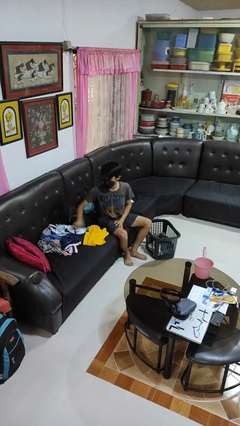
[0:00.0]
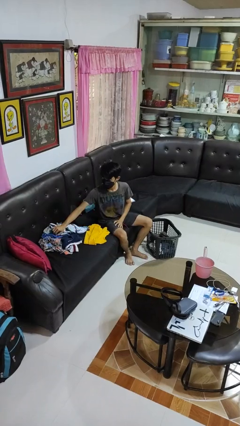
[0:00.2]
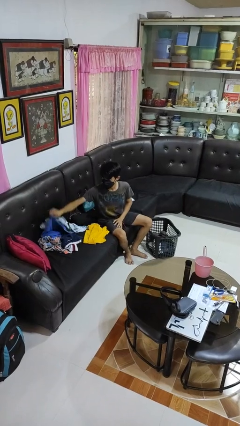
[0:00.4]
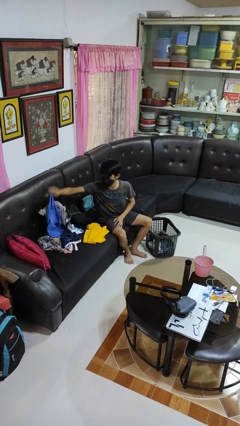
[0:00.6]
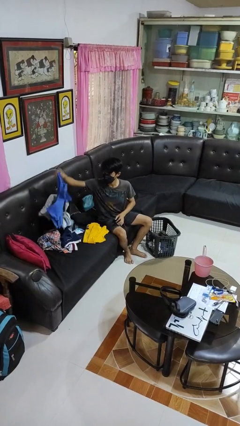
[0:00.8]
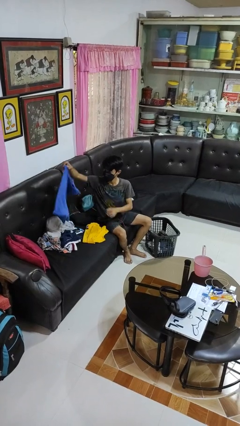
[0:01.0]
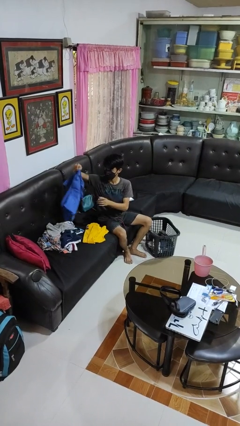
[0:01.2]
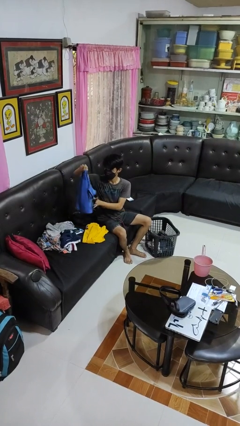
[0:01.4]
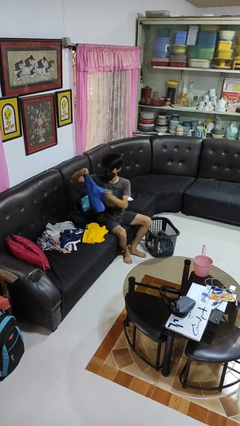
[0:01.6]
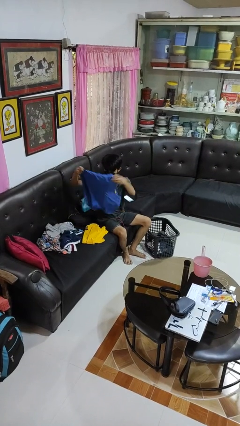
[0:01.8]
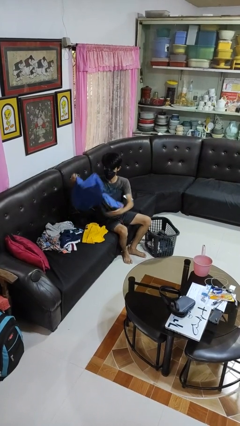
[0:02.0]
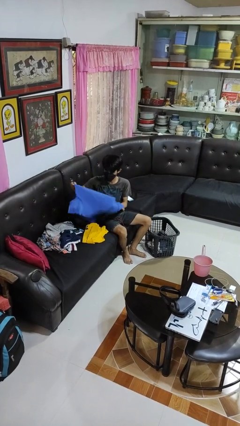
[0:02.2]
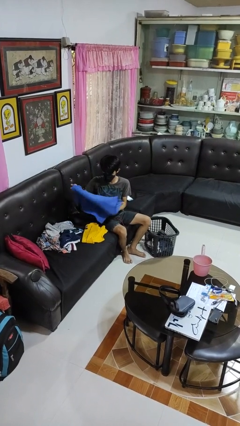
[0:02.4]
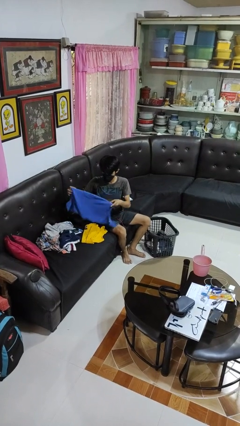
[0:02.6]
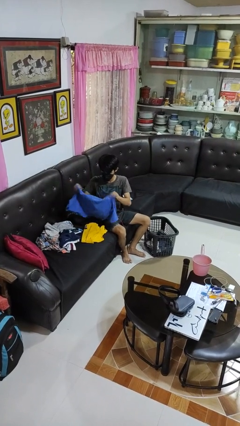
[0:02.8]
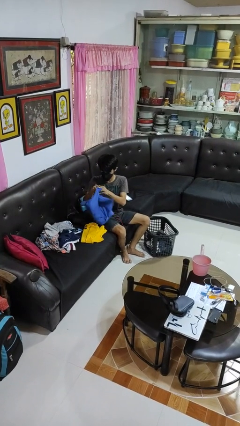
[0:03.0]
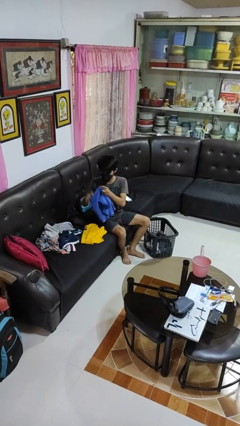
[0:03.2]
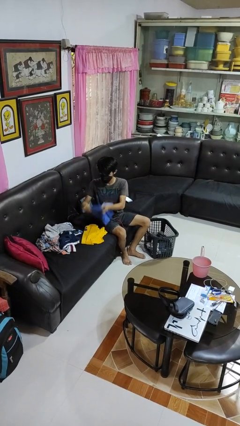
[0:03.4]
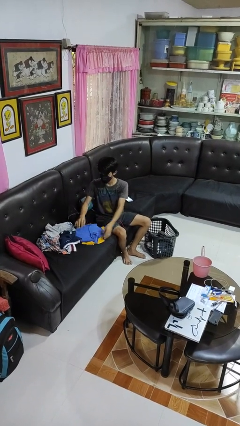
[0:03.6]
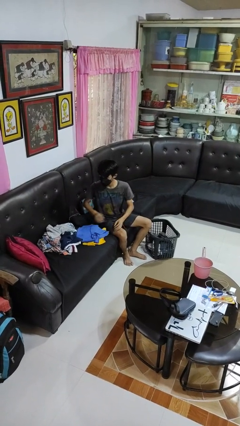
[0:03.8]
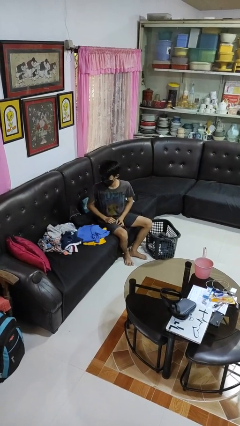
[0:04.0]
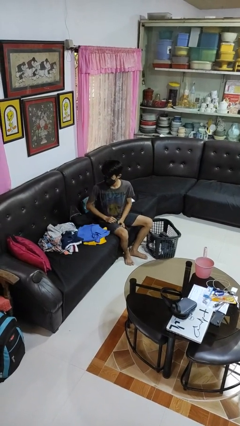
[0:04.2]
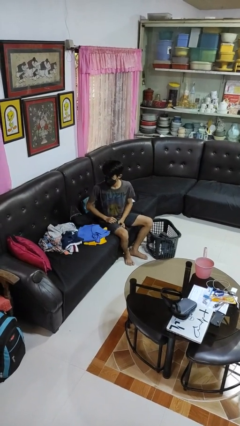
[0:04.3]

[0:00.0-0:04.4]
person folds shirt

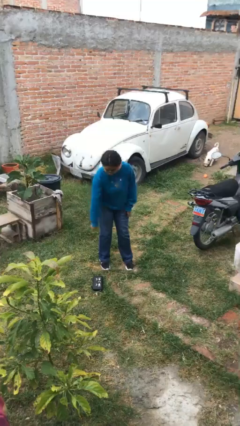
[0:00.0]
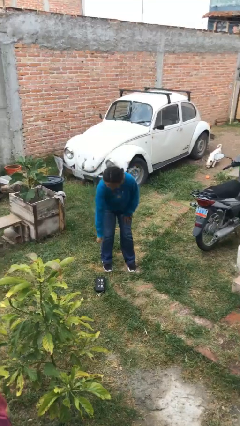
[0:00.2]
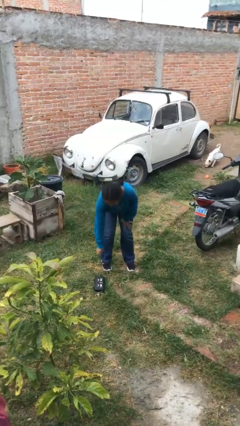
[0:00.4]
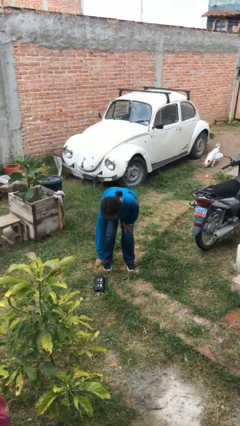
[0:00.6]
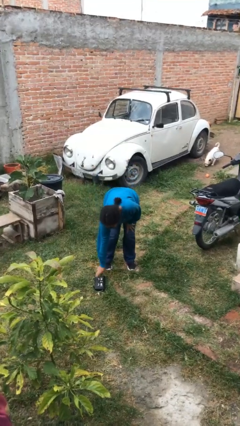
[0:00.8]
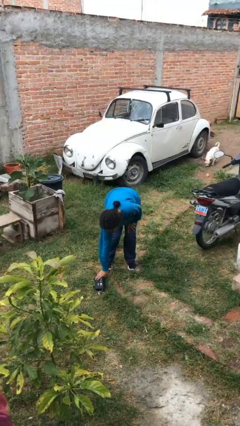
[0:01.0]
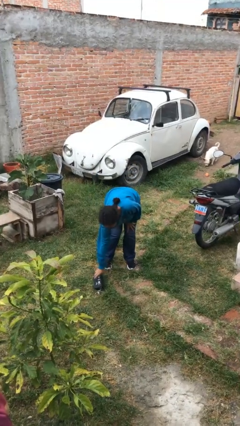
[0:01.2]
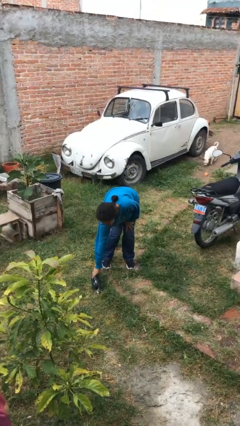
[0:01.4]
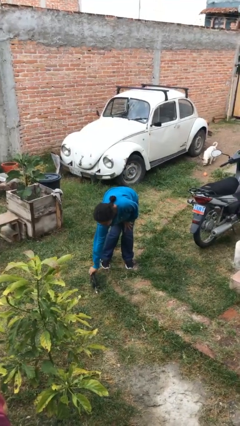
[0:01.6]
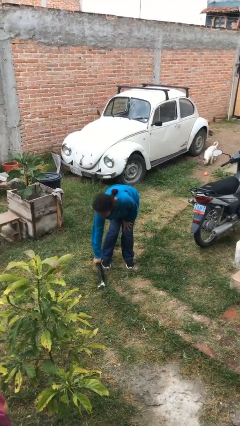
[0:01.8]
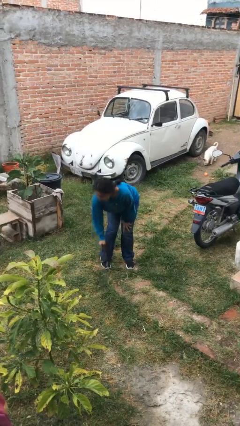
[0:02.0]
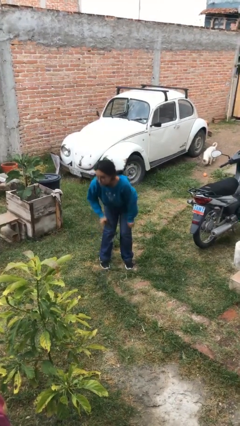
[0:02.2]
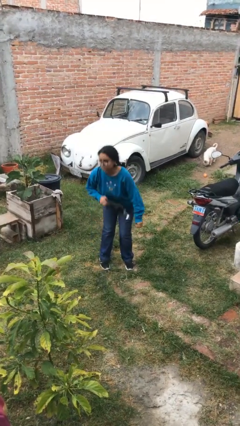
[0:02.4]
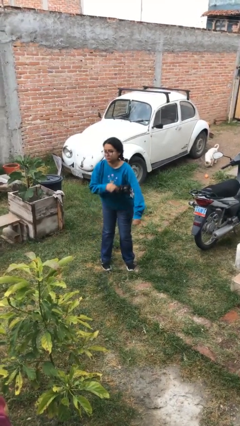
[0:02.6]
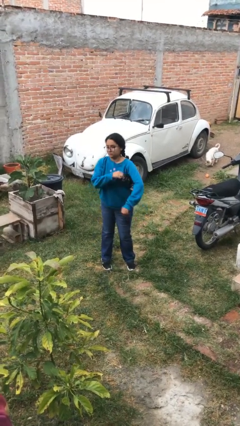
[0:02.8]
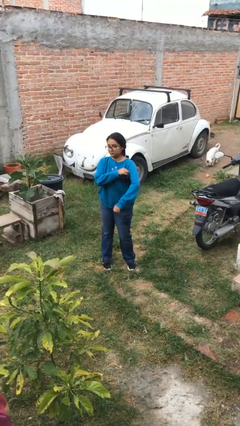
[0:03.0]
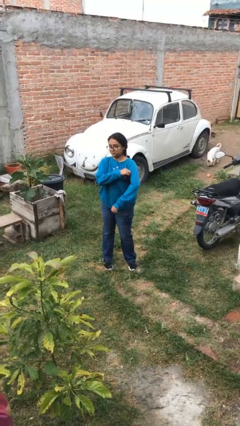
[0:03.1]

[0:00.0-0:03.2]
person picks up object from floor

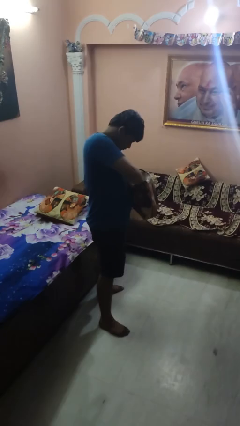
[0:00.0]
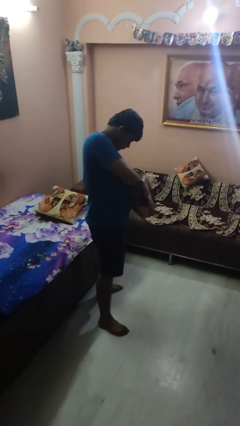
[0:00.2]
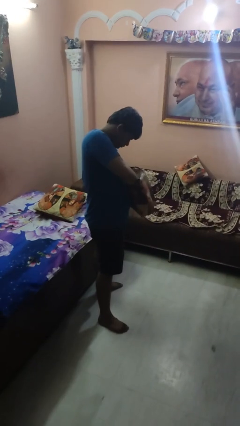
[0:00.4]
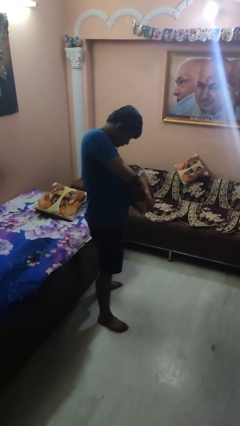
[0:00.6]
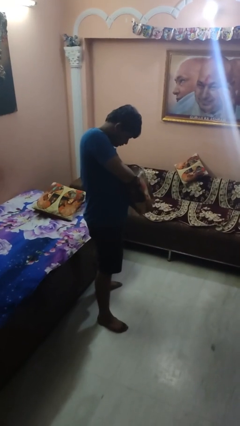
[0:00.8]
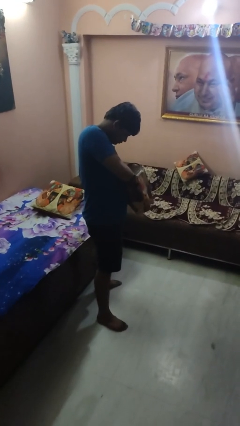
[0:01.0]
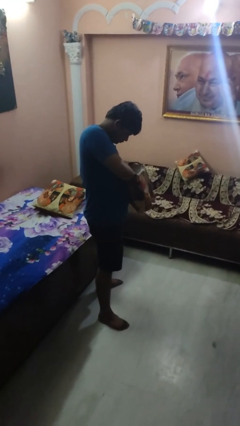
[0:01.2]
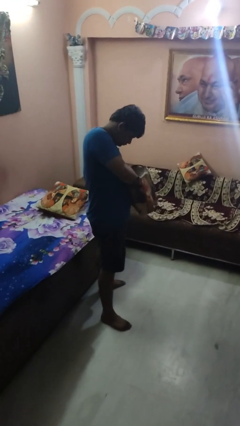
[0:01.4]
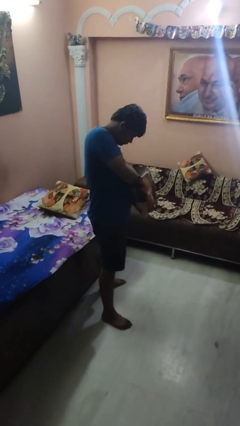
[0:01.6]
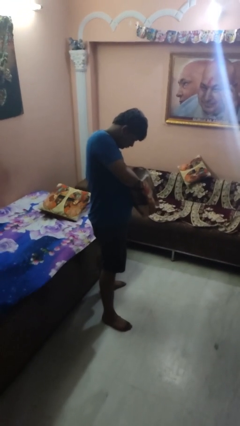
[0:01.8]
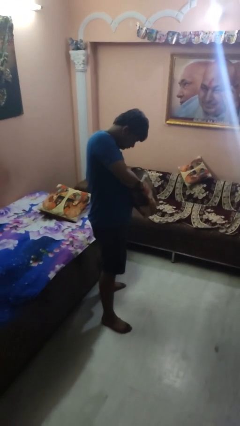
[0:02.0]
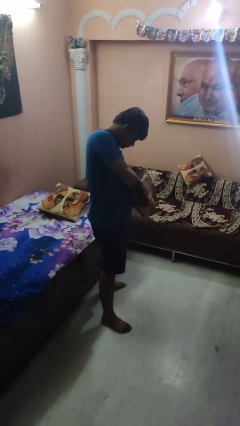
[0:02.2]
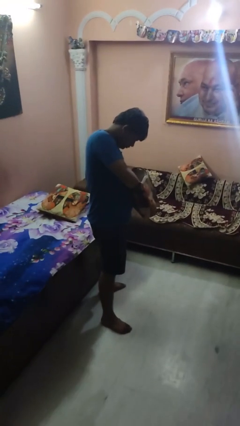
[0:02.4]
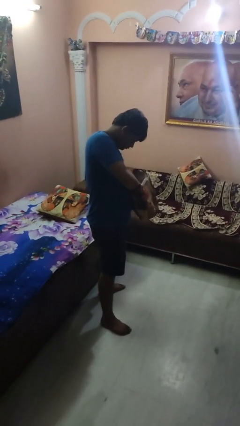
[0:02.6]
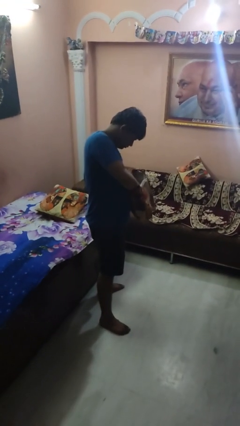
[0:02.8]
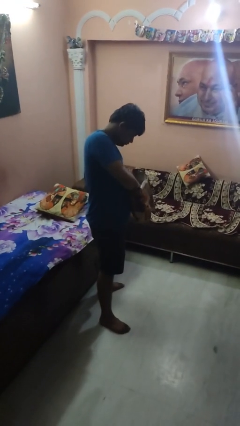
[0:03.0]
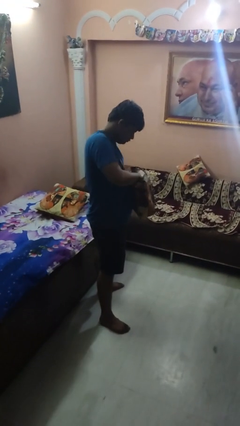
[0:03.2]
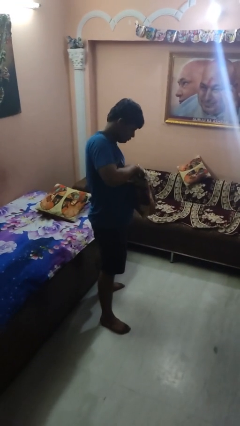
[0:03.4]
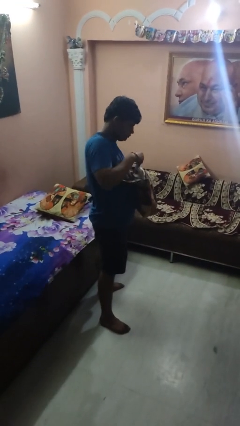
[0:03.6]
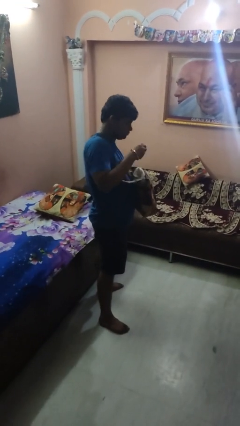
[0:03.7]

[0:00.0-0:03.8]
person searches in purse

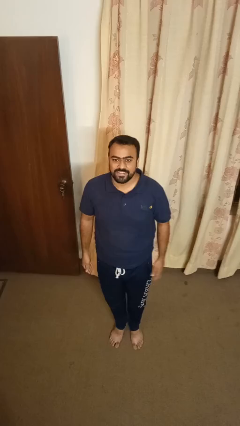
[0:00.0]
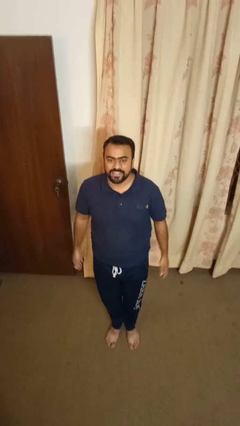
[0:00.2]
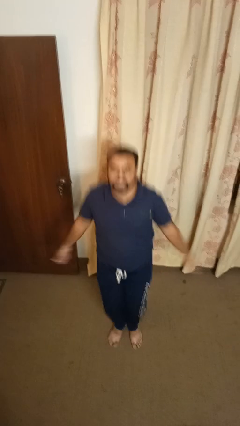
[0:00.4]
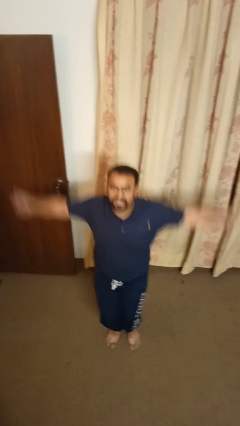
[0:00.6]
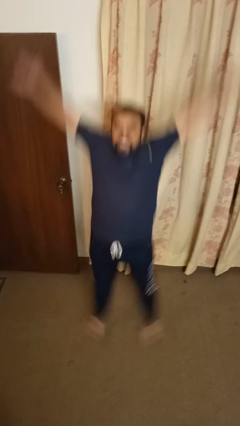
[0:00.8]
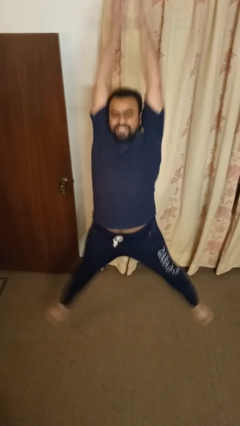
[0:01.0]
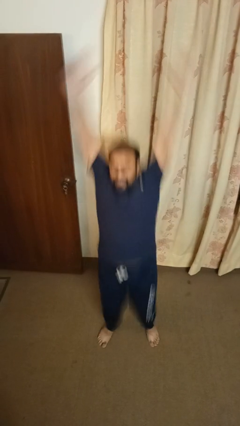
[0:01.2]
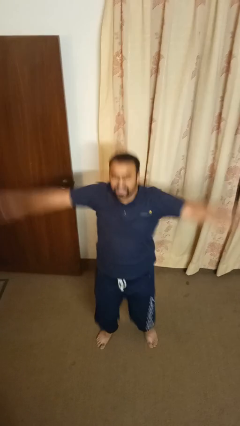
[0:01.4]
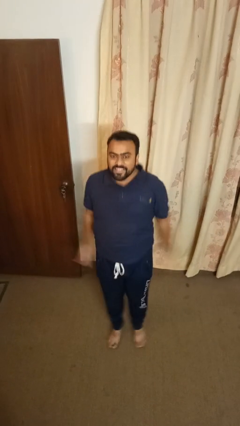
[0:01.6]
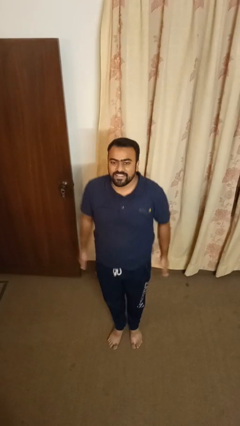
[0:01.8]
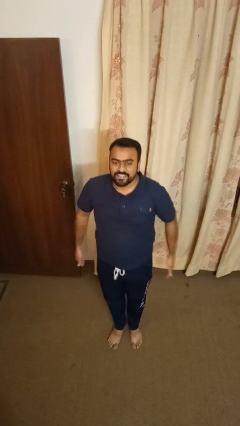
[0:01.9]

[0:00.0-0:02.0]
person exercises with jumping jacks

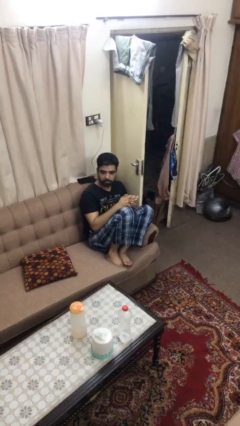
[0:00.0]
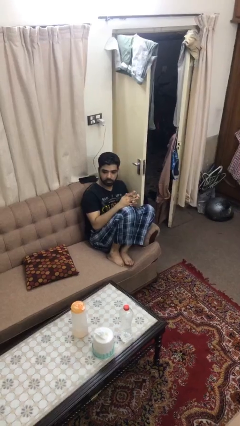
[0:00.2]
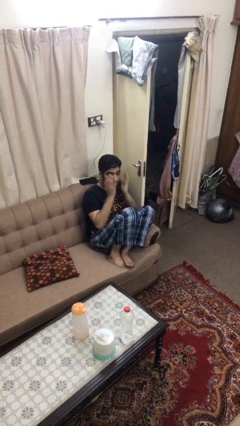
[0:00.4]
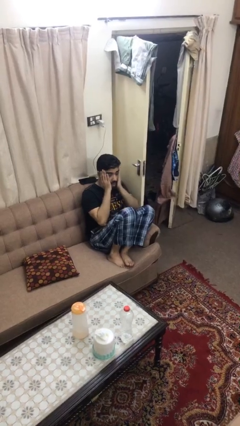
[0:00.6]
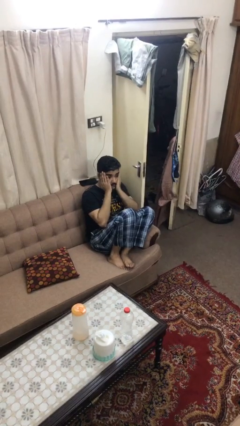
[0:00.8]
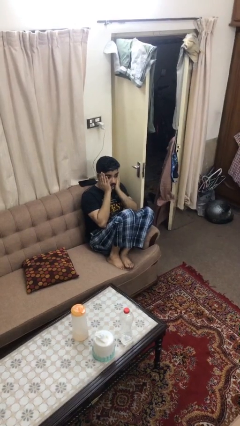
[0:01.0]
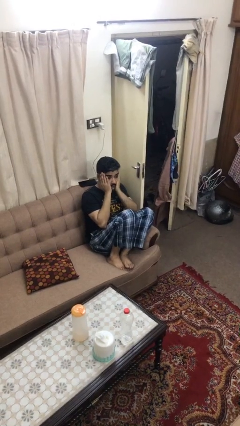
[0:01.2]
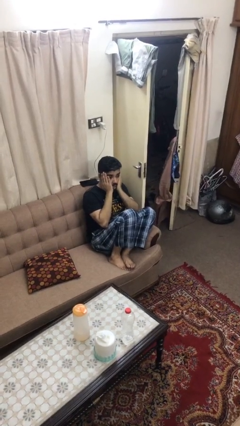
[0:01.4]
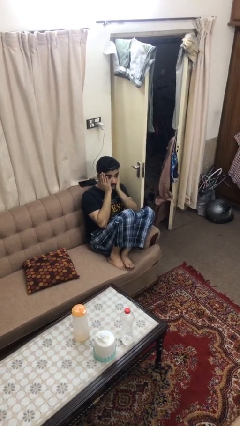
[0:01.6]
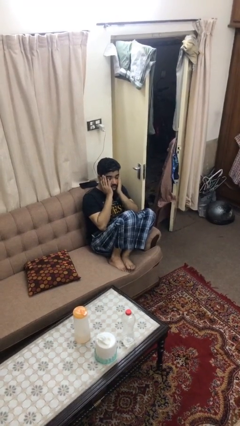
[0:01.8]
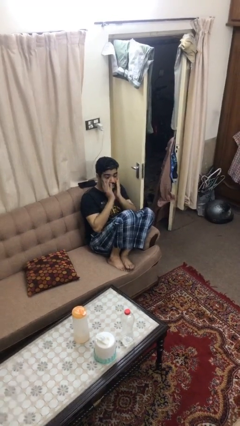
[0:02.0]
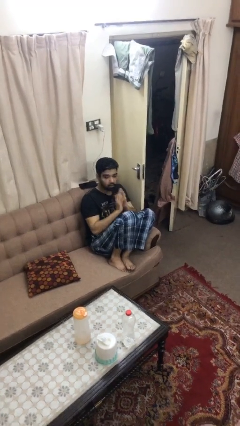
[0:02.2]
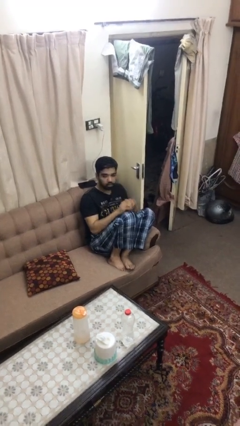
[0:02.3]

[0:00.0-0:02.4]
person covers face with hands

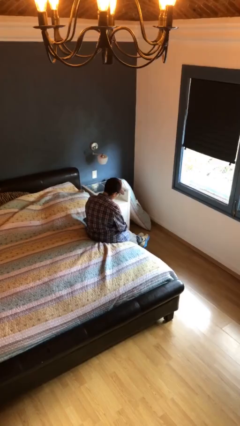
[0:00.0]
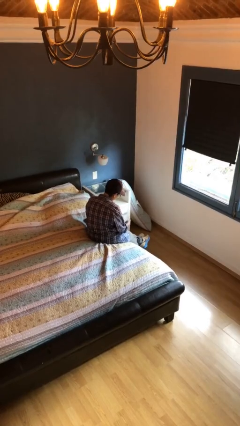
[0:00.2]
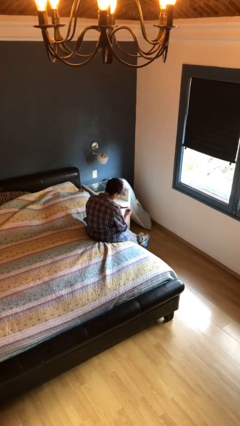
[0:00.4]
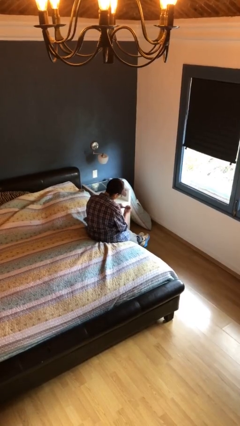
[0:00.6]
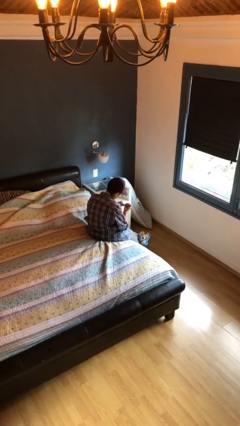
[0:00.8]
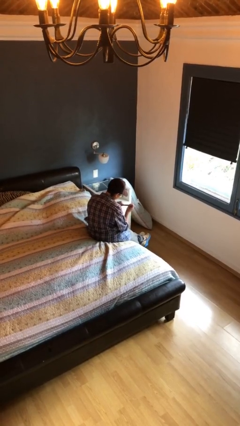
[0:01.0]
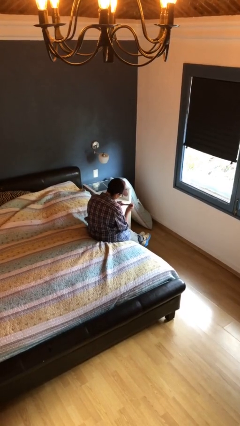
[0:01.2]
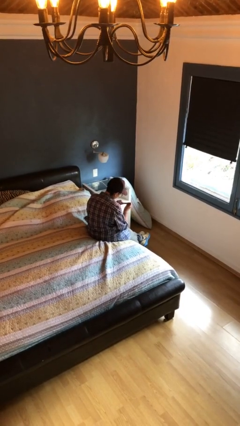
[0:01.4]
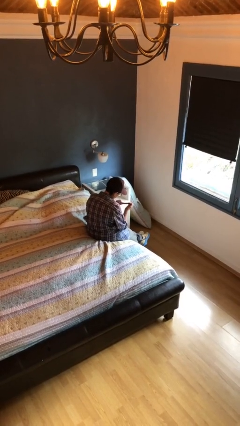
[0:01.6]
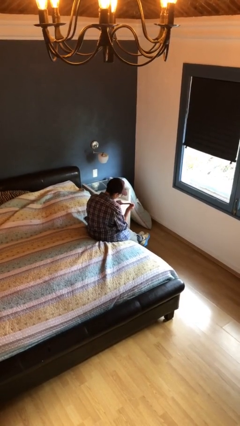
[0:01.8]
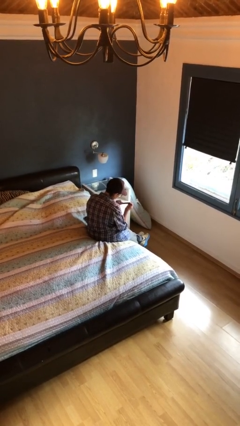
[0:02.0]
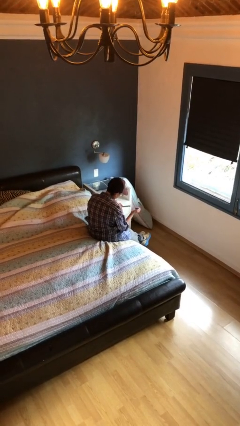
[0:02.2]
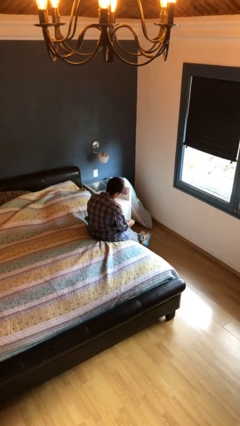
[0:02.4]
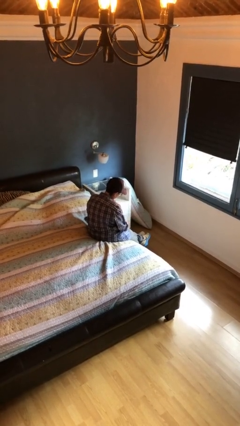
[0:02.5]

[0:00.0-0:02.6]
person files fingernails
